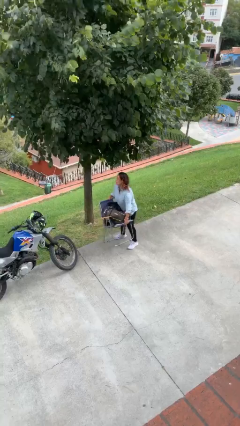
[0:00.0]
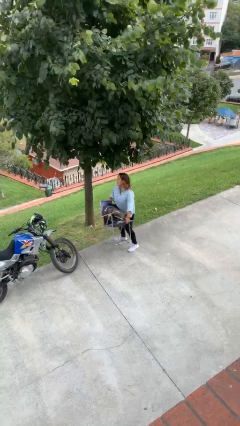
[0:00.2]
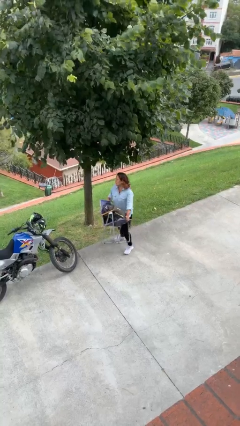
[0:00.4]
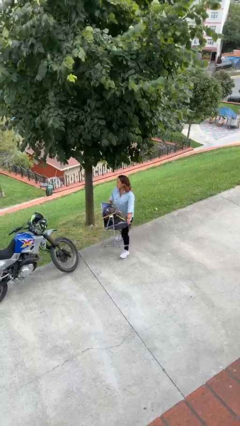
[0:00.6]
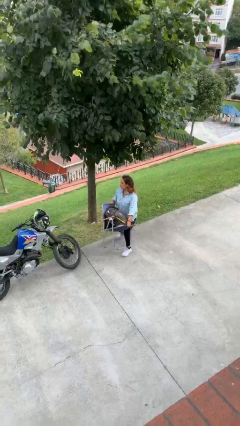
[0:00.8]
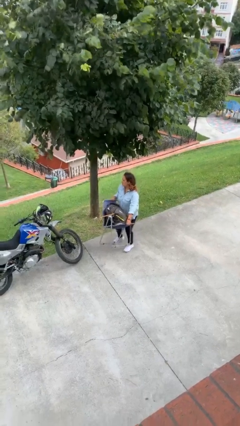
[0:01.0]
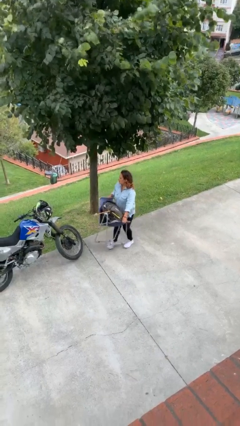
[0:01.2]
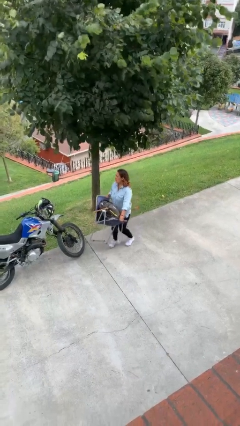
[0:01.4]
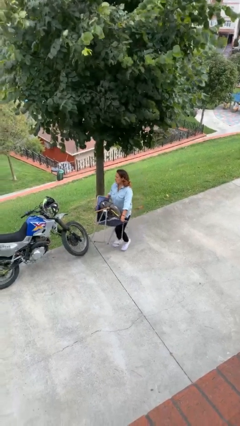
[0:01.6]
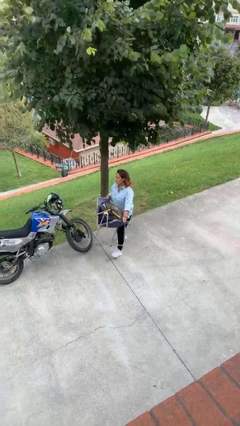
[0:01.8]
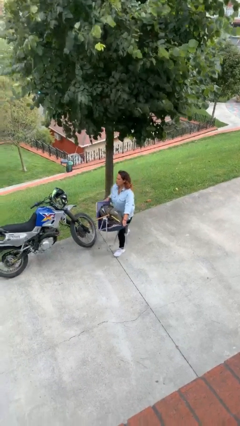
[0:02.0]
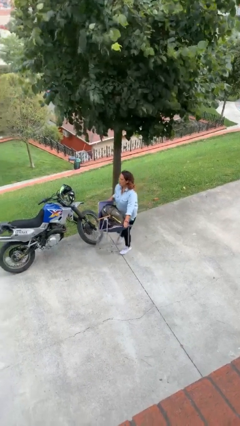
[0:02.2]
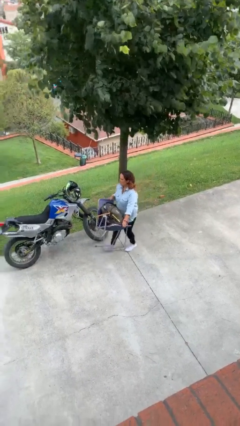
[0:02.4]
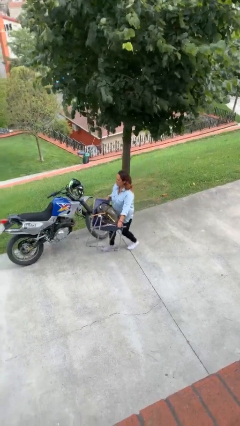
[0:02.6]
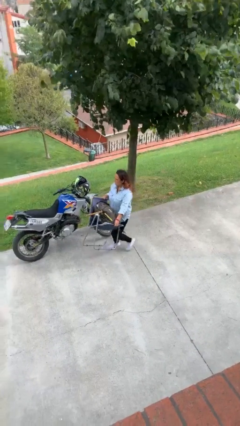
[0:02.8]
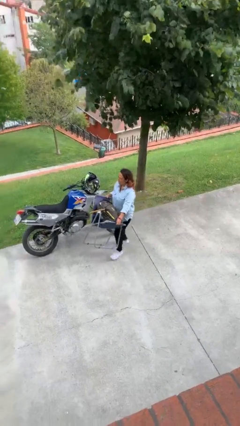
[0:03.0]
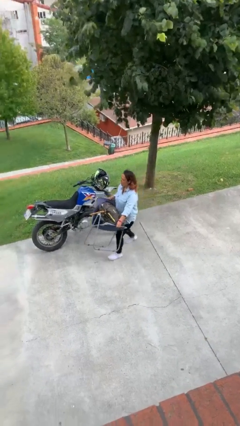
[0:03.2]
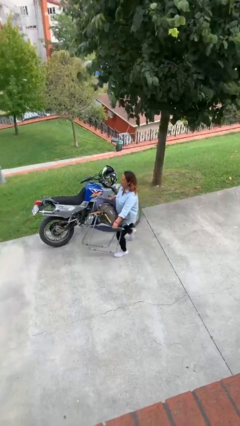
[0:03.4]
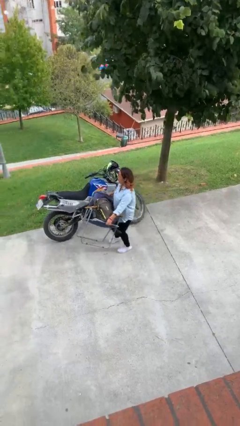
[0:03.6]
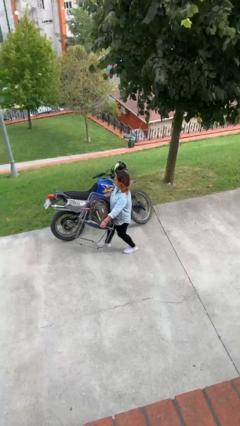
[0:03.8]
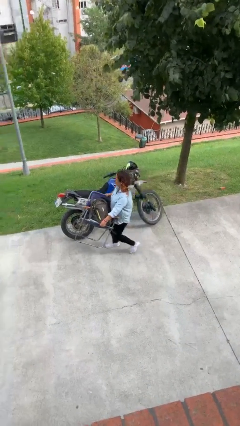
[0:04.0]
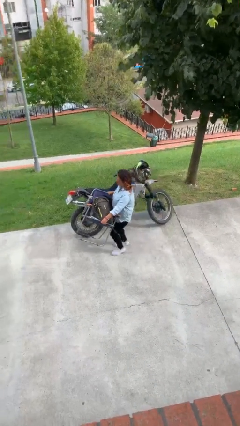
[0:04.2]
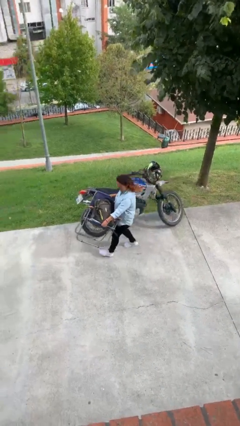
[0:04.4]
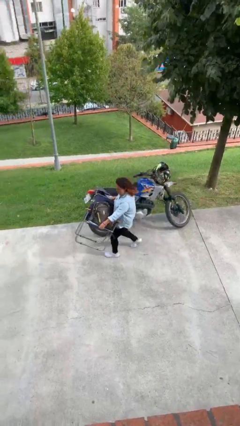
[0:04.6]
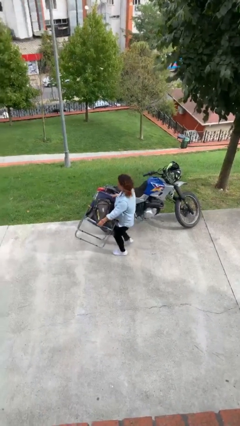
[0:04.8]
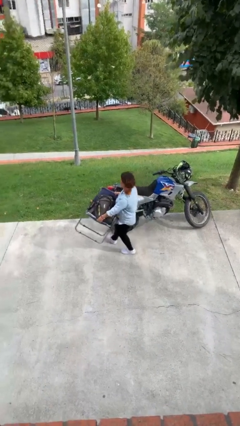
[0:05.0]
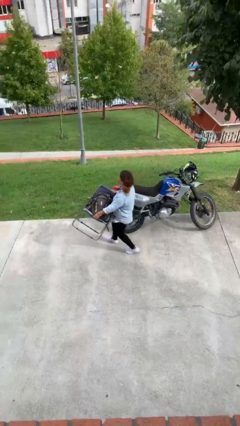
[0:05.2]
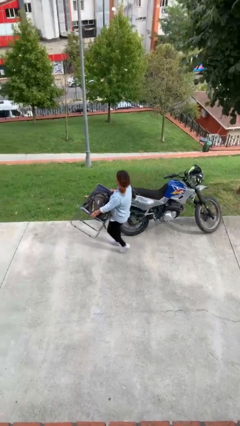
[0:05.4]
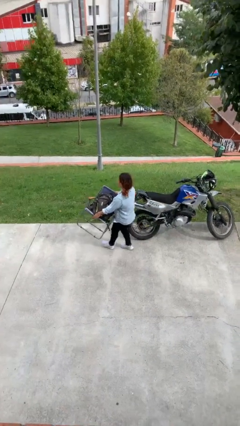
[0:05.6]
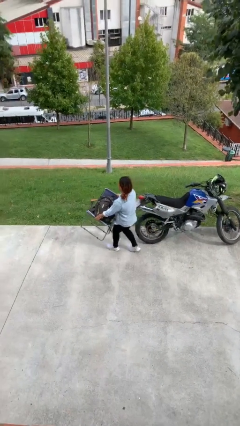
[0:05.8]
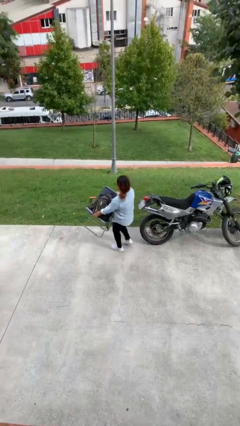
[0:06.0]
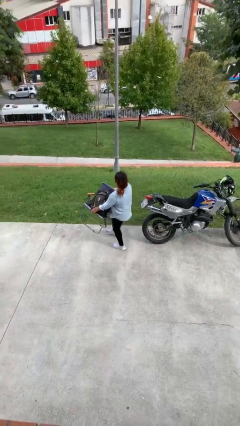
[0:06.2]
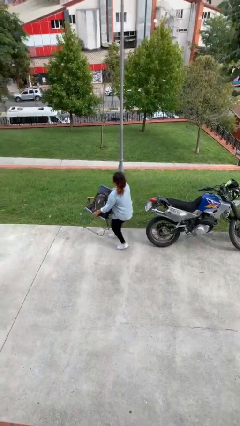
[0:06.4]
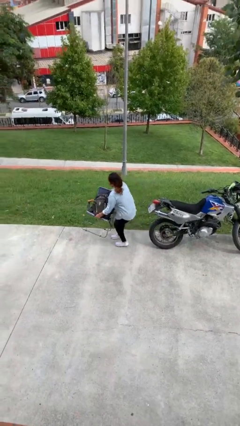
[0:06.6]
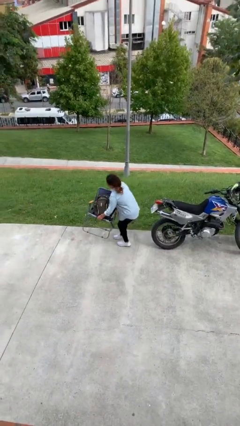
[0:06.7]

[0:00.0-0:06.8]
person carries heavy object

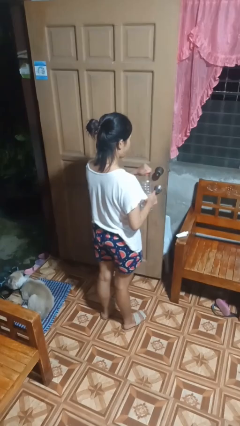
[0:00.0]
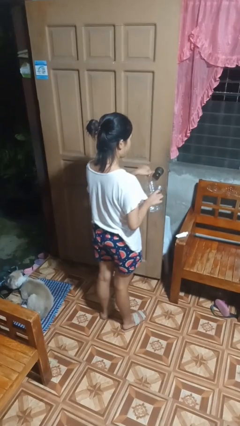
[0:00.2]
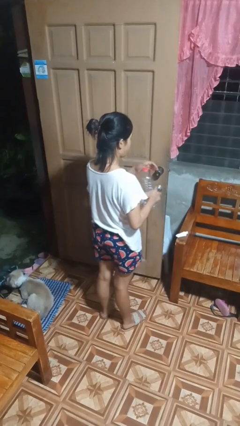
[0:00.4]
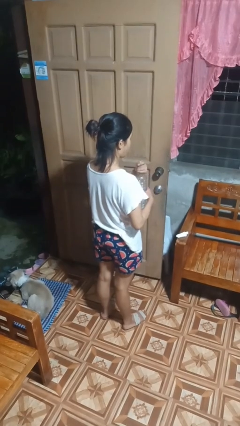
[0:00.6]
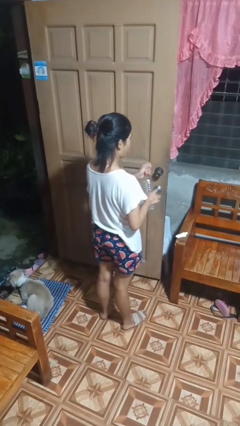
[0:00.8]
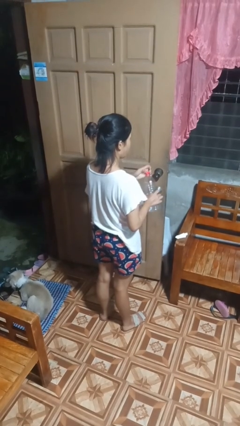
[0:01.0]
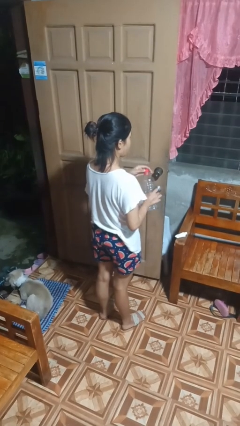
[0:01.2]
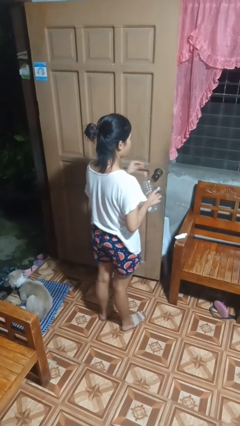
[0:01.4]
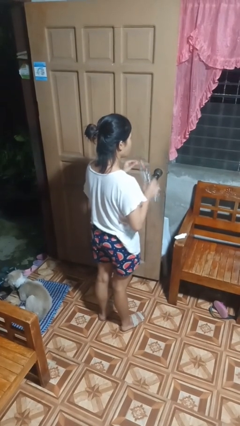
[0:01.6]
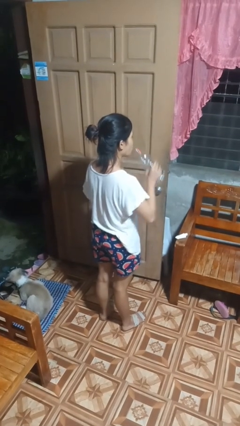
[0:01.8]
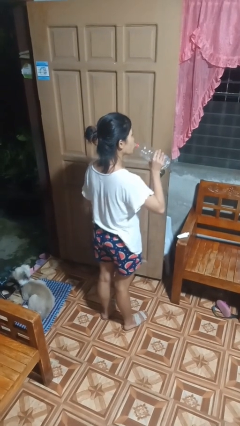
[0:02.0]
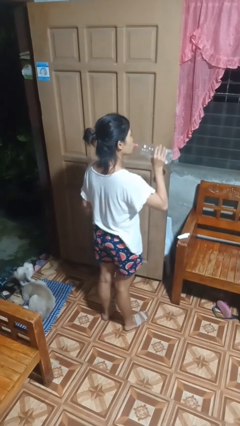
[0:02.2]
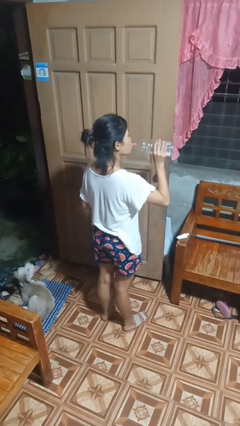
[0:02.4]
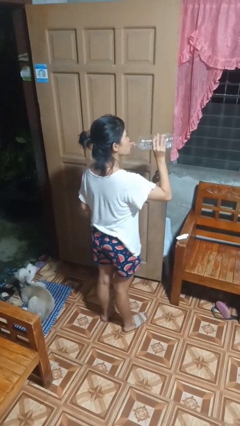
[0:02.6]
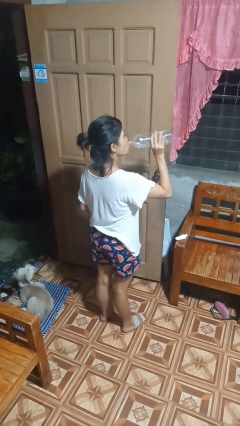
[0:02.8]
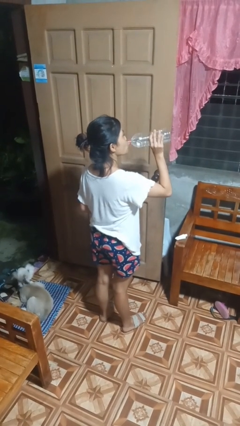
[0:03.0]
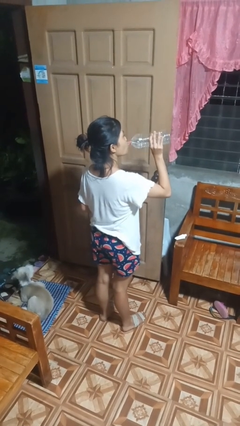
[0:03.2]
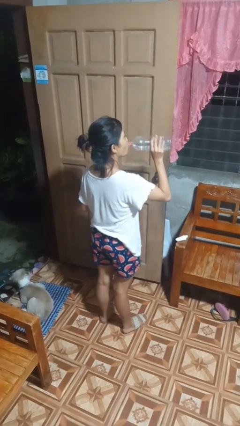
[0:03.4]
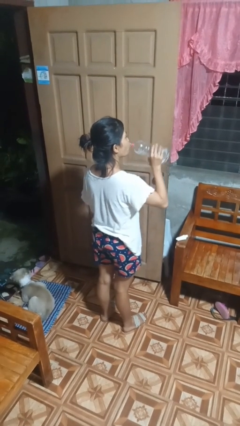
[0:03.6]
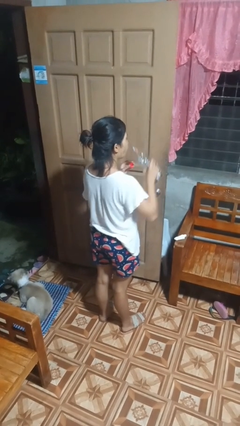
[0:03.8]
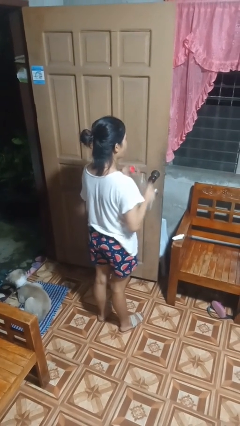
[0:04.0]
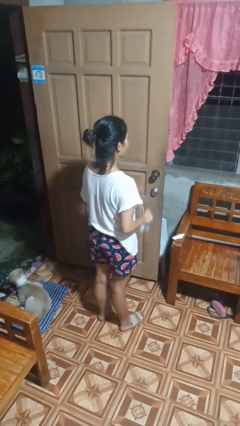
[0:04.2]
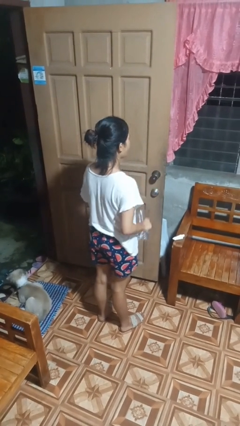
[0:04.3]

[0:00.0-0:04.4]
person drinks from bottle

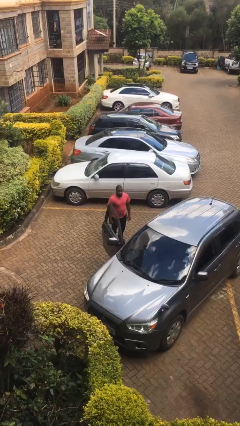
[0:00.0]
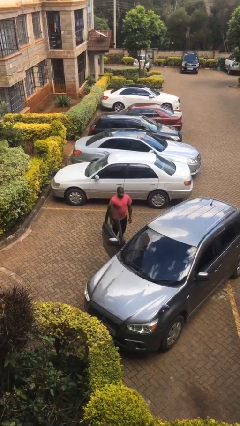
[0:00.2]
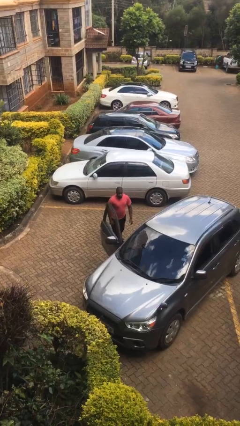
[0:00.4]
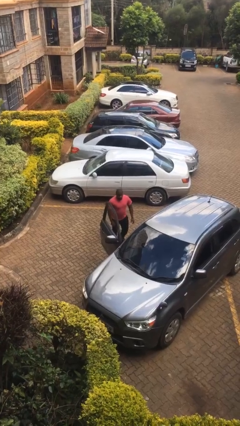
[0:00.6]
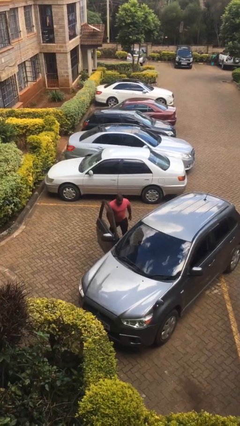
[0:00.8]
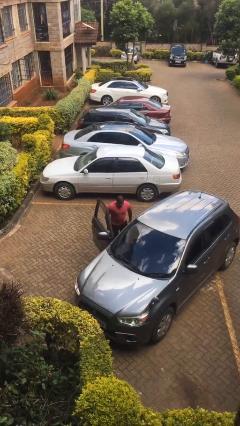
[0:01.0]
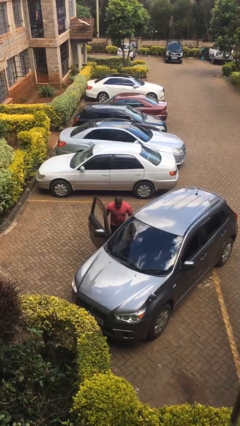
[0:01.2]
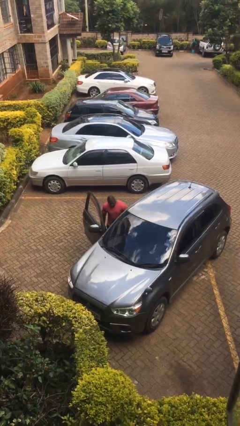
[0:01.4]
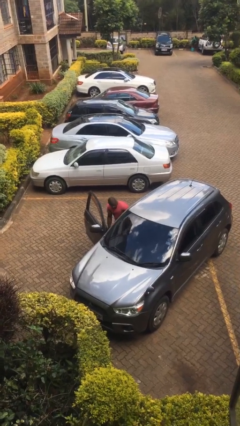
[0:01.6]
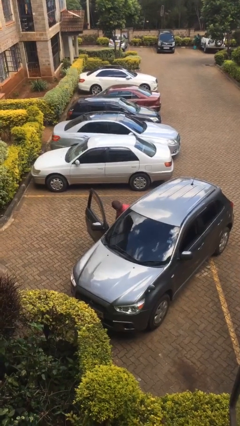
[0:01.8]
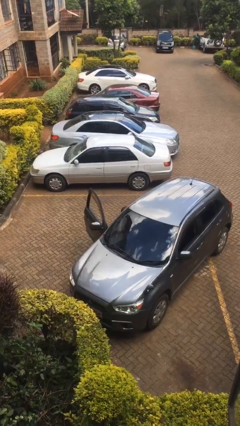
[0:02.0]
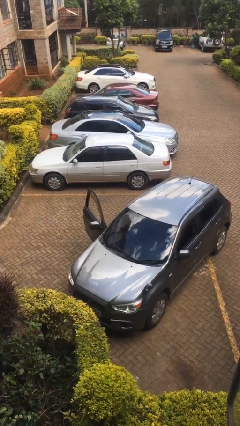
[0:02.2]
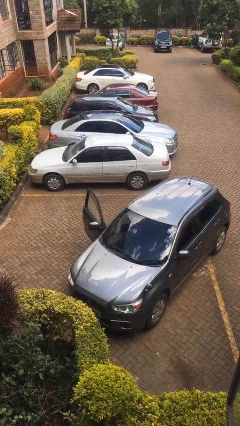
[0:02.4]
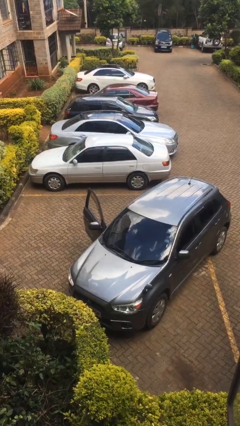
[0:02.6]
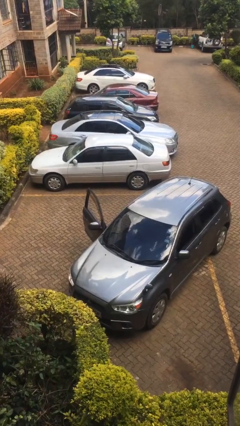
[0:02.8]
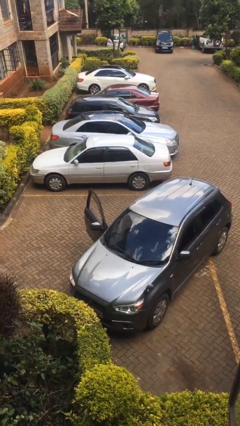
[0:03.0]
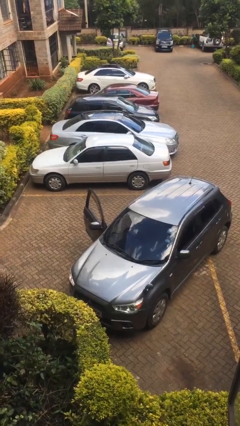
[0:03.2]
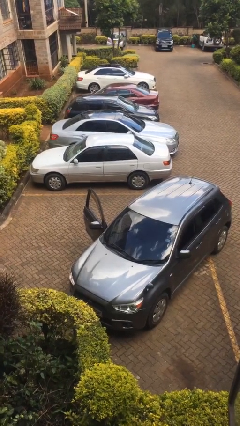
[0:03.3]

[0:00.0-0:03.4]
person enters car

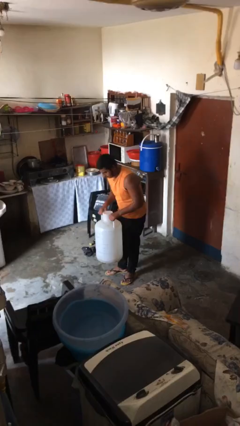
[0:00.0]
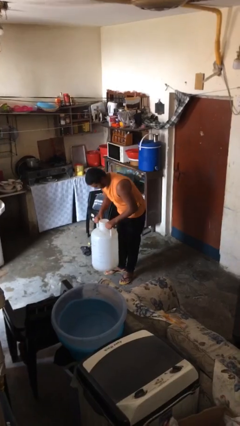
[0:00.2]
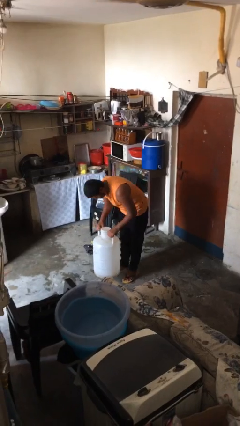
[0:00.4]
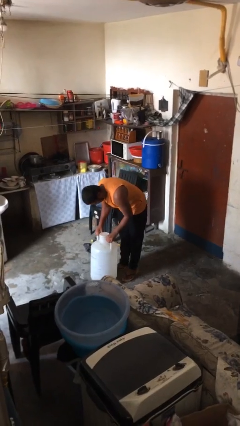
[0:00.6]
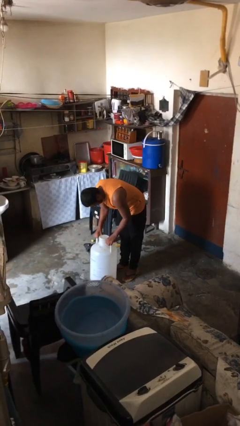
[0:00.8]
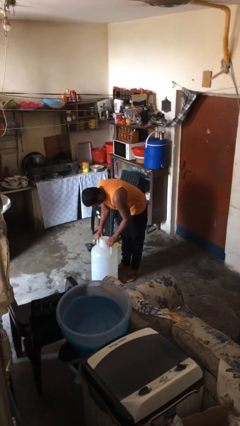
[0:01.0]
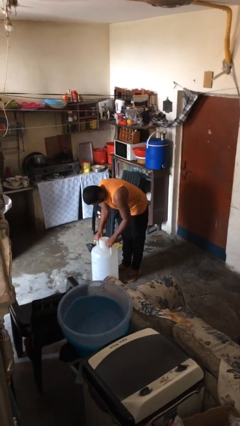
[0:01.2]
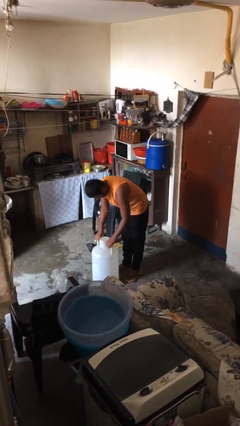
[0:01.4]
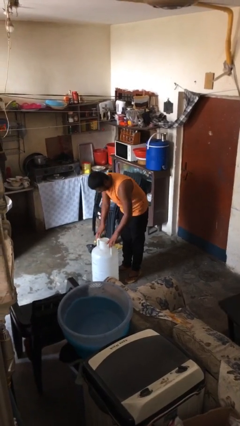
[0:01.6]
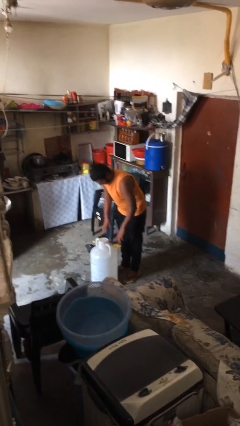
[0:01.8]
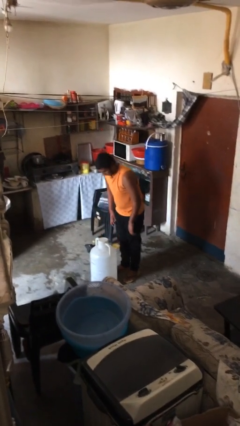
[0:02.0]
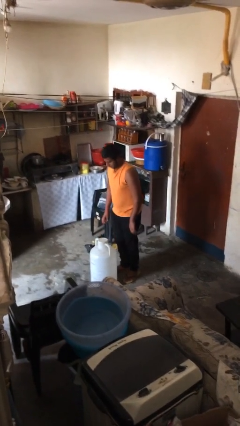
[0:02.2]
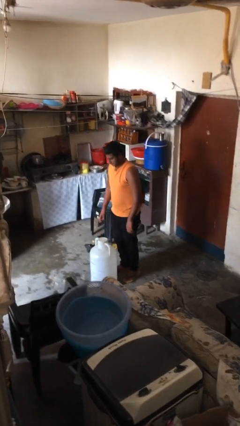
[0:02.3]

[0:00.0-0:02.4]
person puts down object on floor

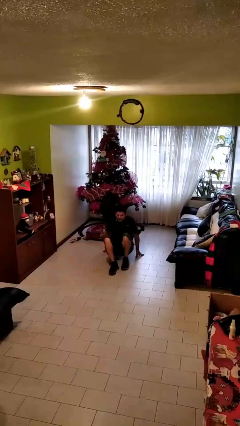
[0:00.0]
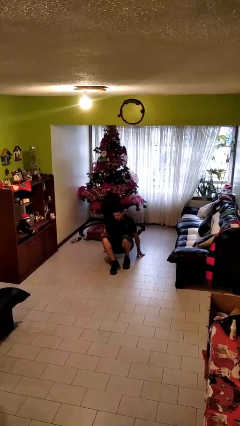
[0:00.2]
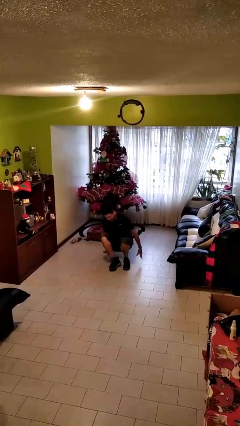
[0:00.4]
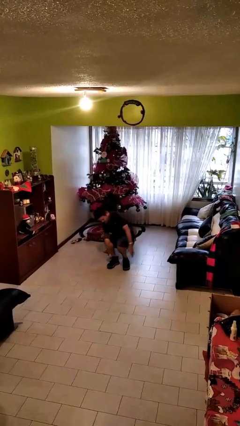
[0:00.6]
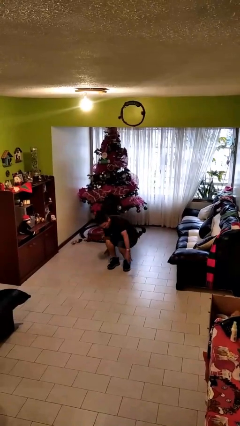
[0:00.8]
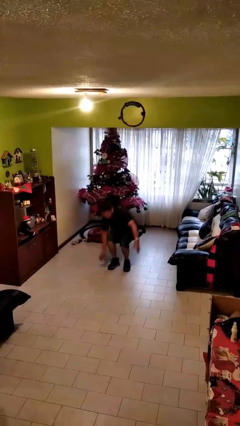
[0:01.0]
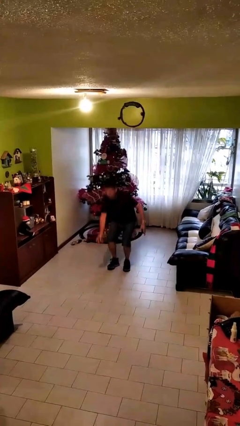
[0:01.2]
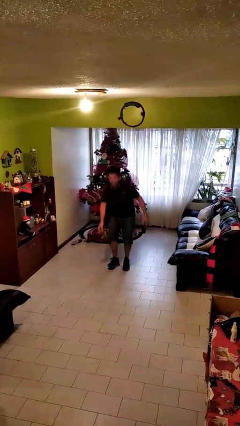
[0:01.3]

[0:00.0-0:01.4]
person stands up
